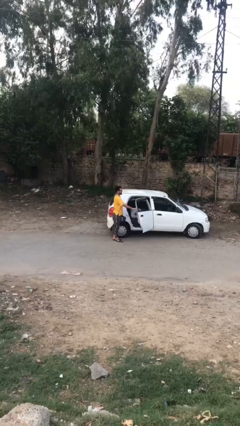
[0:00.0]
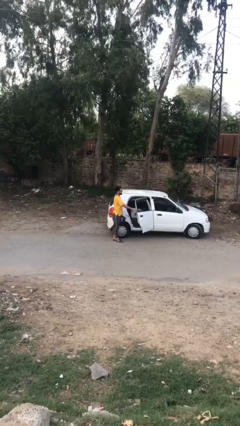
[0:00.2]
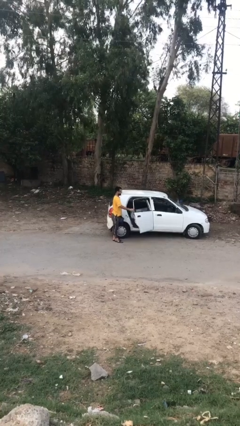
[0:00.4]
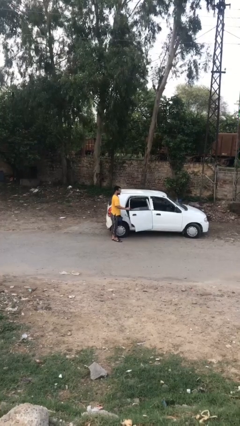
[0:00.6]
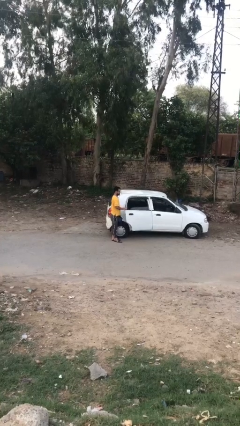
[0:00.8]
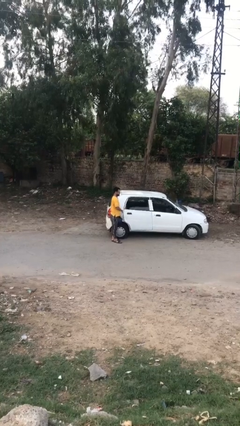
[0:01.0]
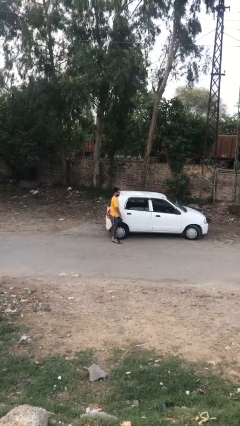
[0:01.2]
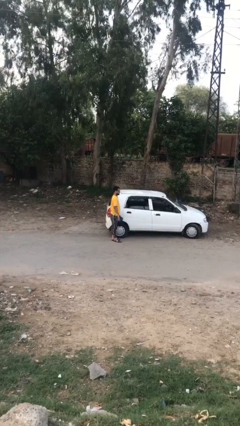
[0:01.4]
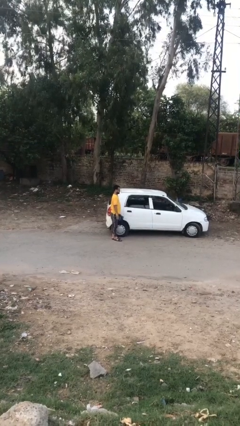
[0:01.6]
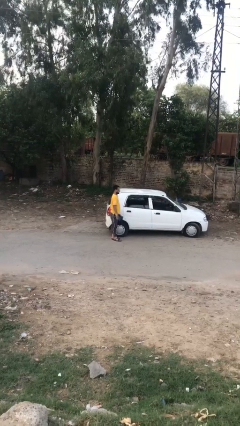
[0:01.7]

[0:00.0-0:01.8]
person closes car door

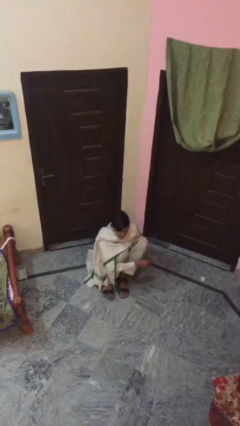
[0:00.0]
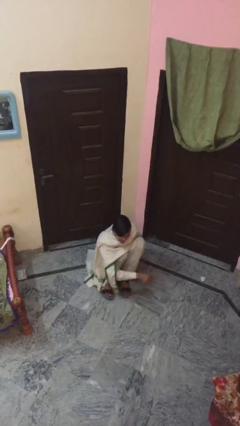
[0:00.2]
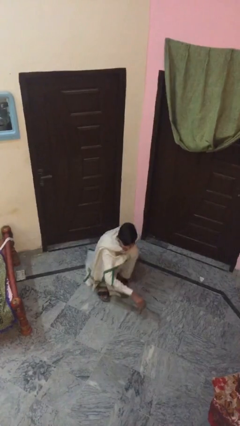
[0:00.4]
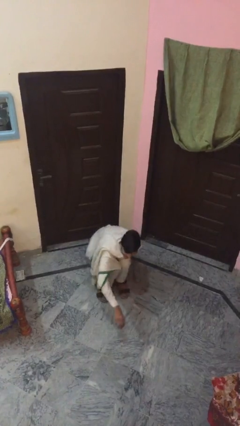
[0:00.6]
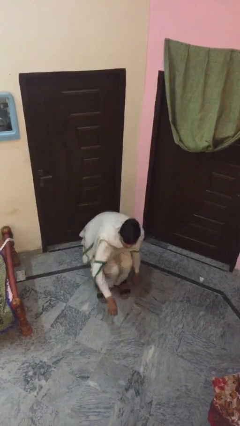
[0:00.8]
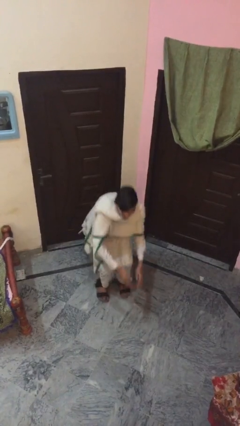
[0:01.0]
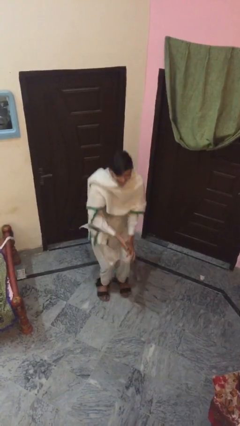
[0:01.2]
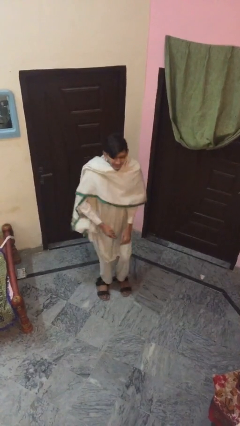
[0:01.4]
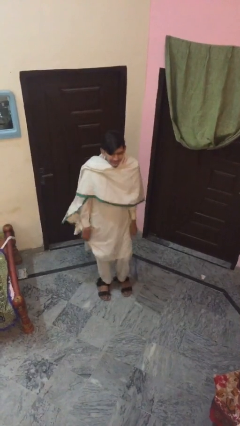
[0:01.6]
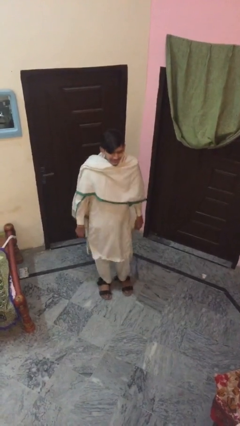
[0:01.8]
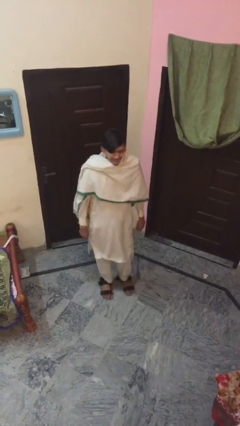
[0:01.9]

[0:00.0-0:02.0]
person stands up

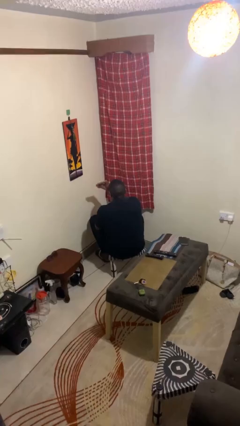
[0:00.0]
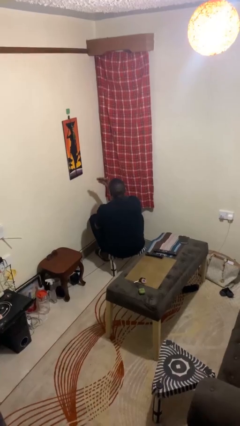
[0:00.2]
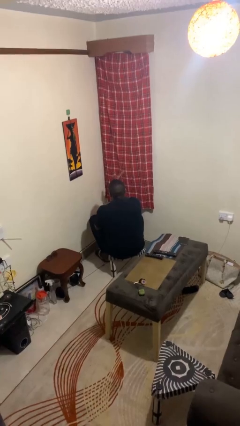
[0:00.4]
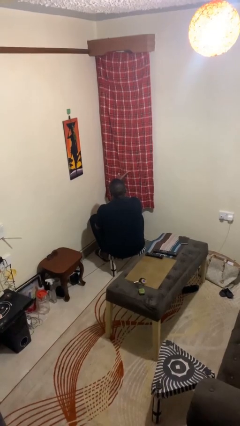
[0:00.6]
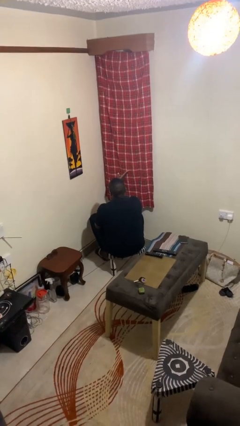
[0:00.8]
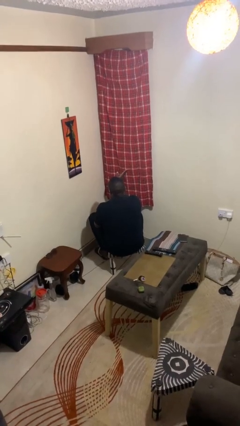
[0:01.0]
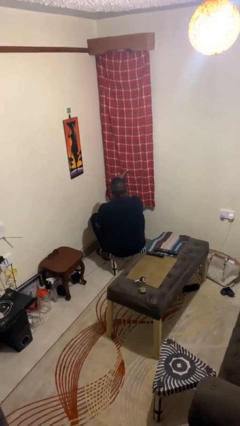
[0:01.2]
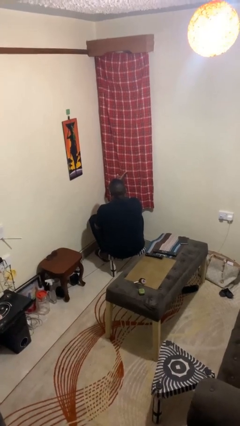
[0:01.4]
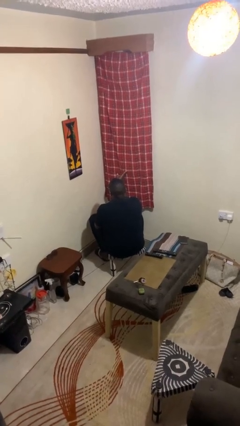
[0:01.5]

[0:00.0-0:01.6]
person gestures swipe right

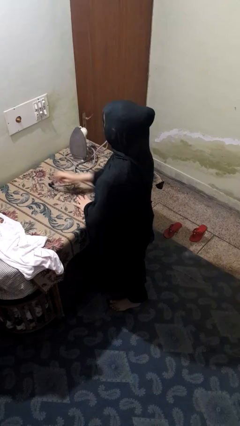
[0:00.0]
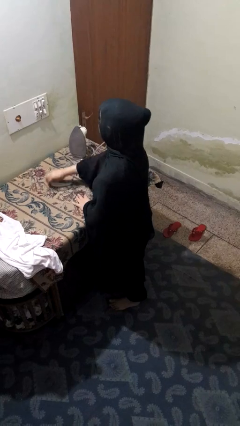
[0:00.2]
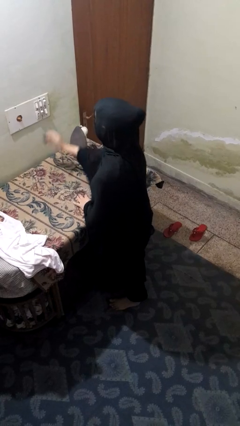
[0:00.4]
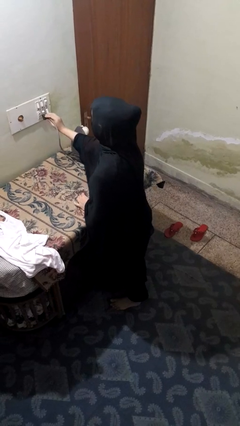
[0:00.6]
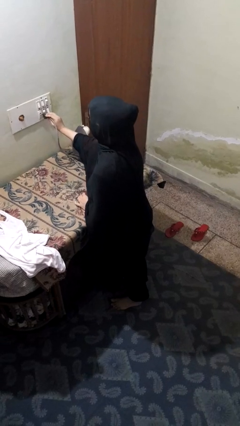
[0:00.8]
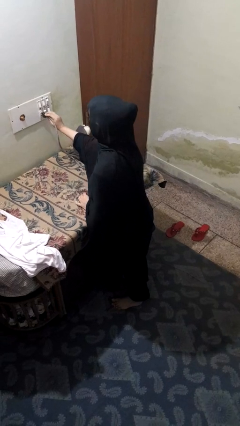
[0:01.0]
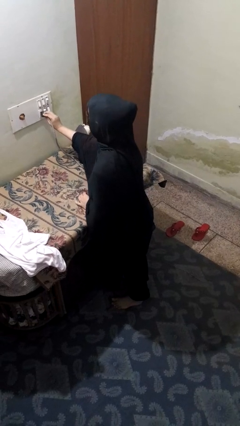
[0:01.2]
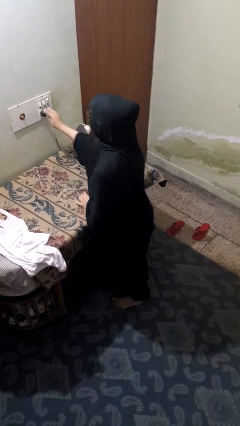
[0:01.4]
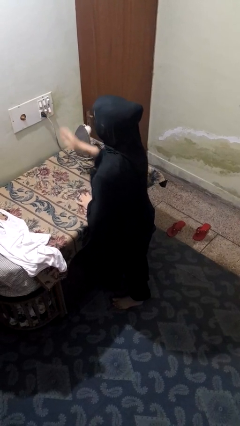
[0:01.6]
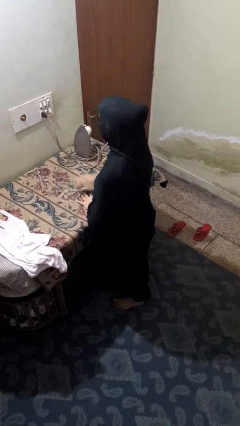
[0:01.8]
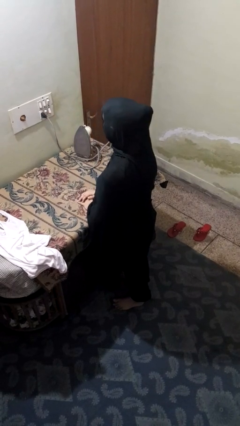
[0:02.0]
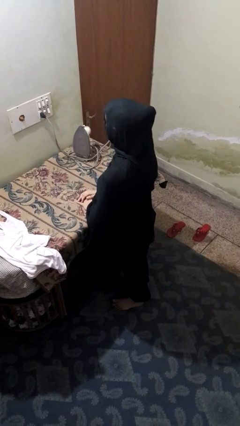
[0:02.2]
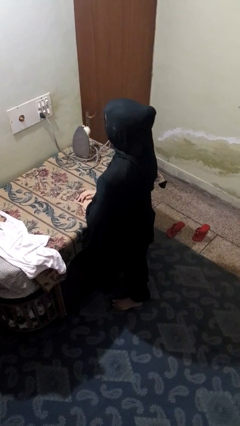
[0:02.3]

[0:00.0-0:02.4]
person plugs into electrical socket

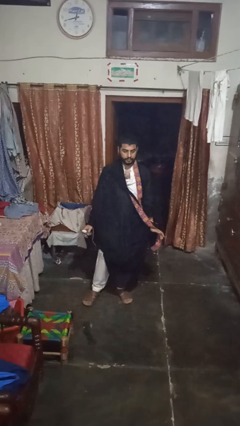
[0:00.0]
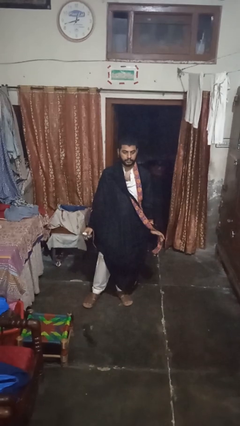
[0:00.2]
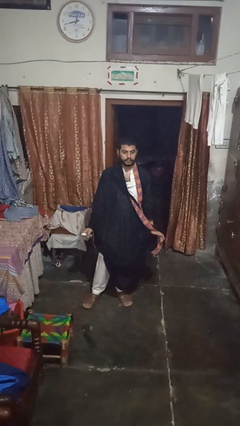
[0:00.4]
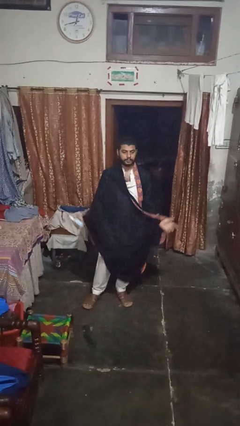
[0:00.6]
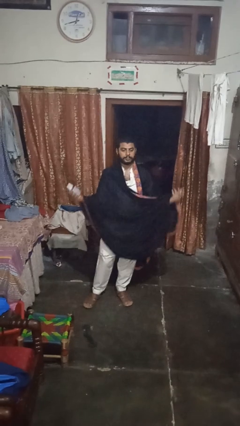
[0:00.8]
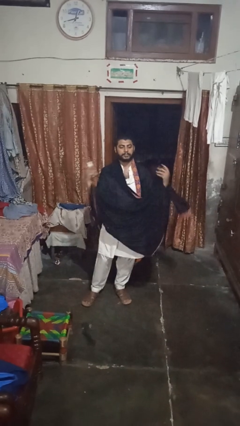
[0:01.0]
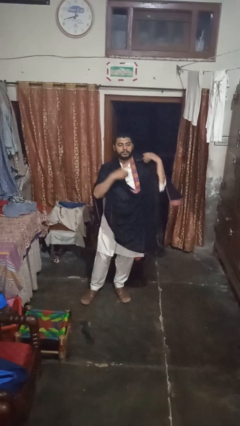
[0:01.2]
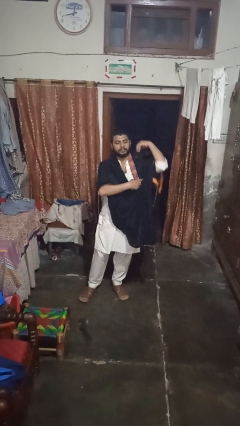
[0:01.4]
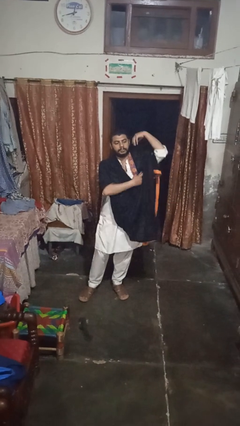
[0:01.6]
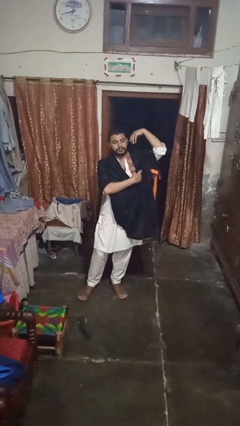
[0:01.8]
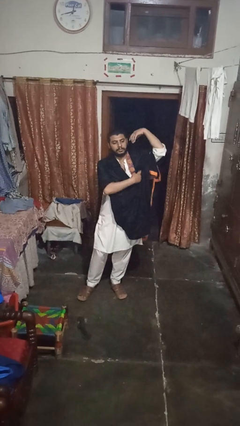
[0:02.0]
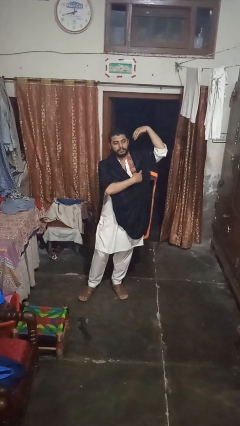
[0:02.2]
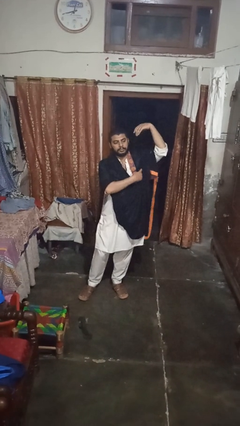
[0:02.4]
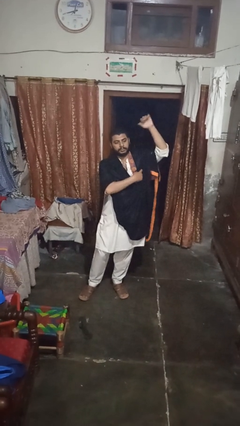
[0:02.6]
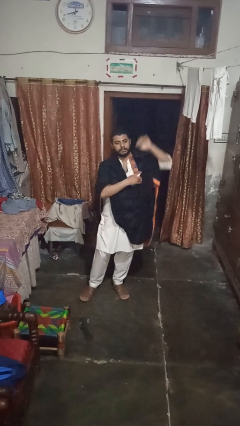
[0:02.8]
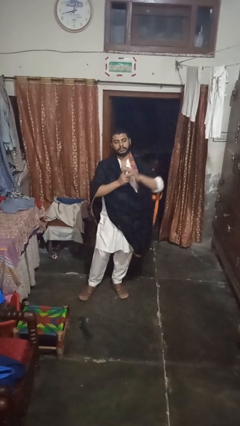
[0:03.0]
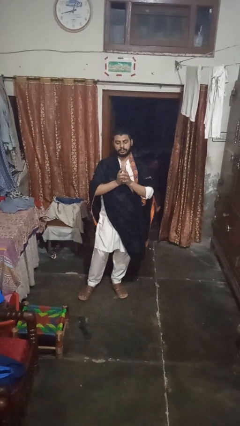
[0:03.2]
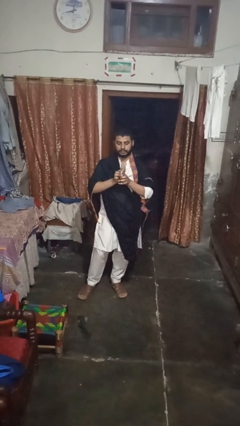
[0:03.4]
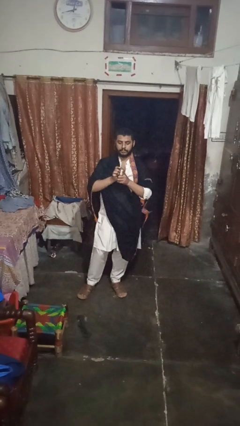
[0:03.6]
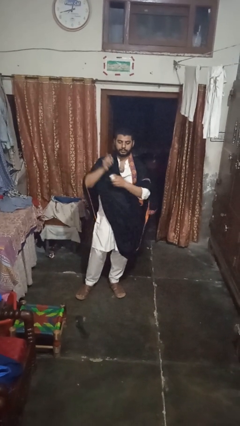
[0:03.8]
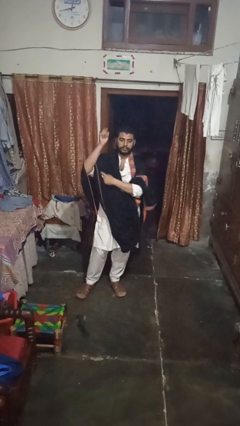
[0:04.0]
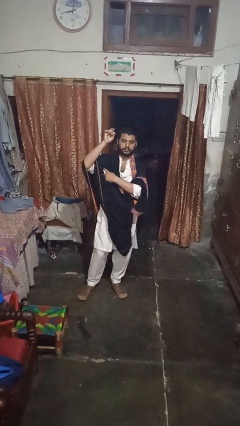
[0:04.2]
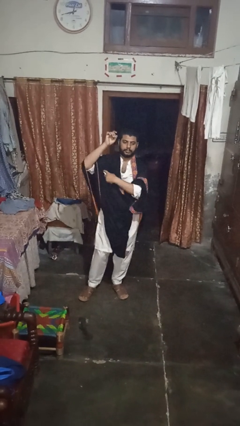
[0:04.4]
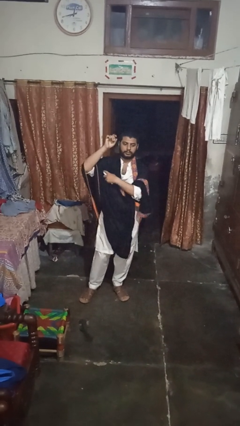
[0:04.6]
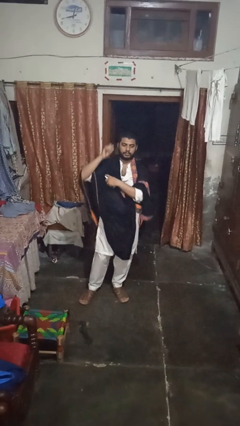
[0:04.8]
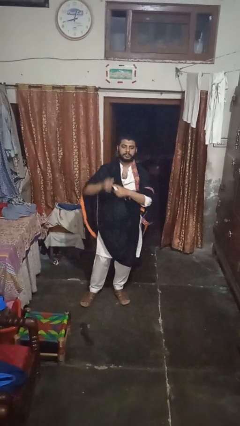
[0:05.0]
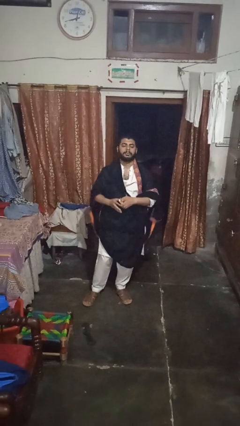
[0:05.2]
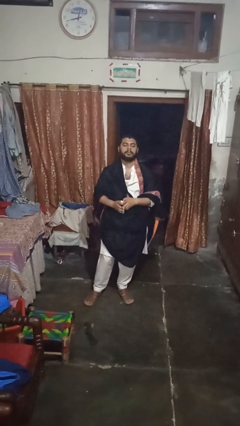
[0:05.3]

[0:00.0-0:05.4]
person applies deodorant

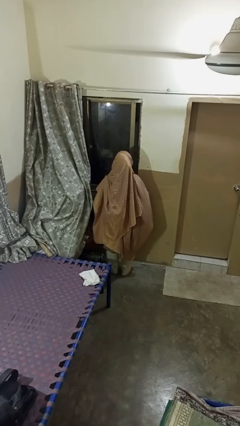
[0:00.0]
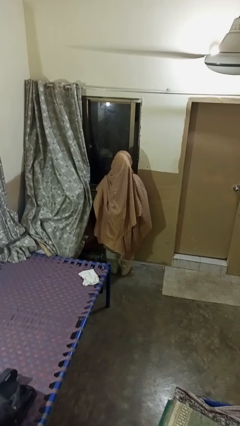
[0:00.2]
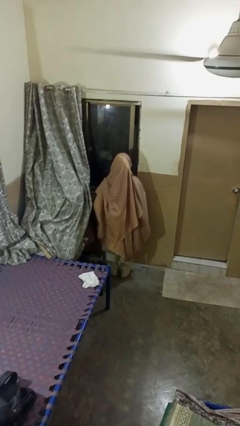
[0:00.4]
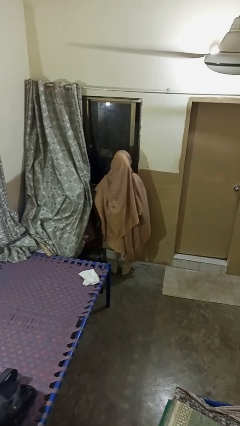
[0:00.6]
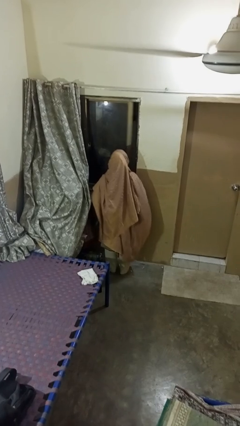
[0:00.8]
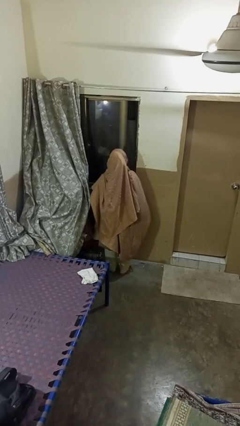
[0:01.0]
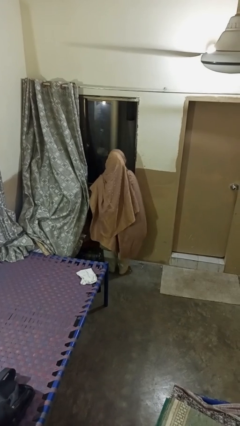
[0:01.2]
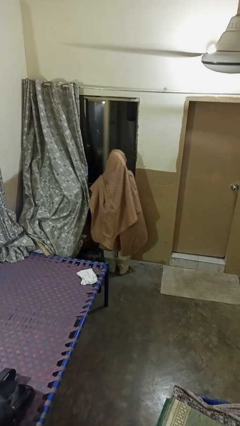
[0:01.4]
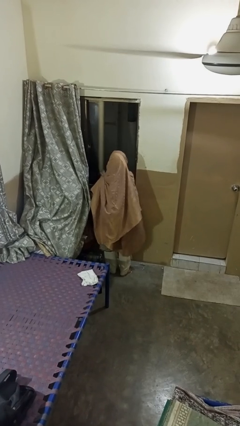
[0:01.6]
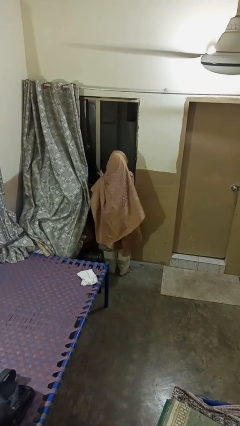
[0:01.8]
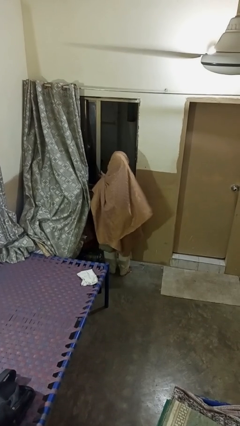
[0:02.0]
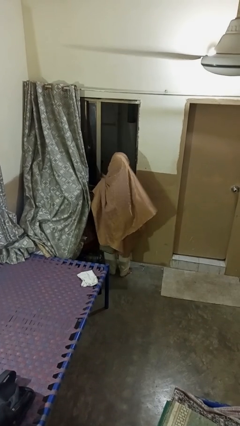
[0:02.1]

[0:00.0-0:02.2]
person opens home window

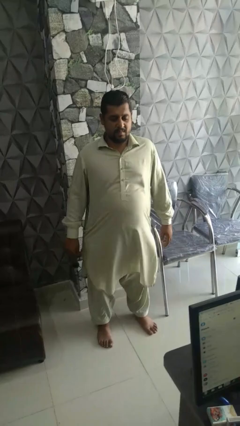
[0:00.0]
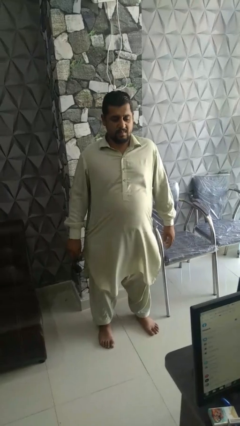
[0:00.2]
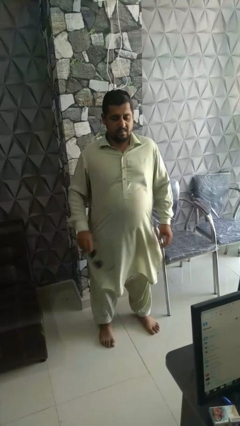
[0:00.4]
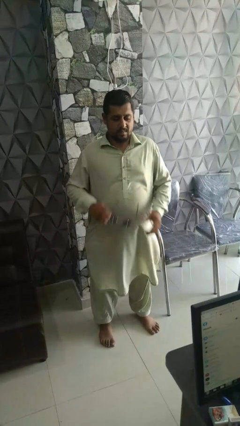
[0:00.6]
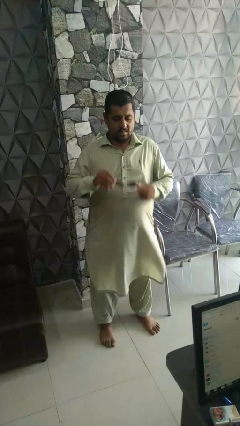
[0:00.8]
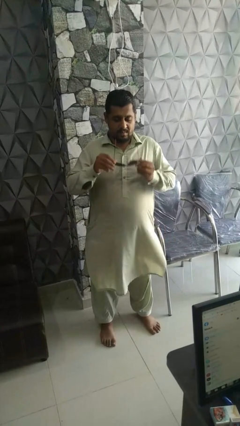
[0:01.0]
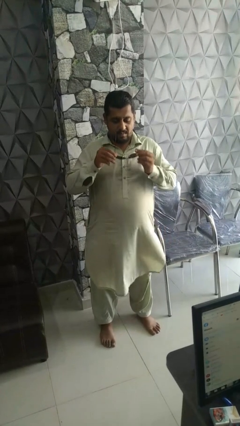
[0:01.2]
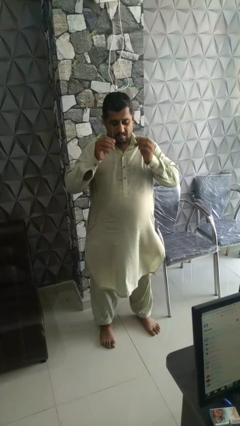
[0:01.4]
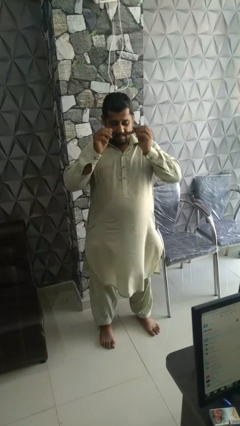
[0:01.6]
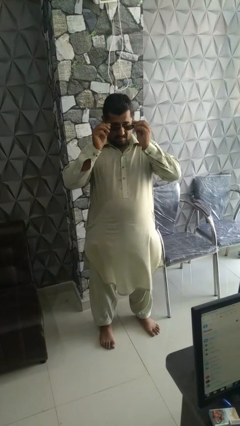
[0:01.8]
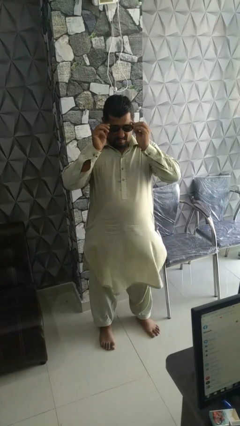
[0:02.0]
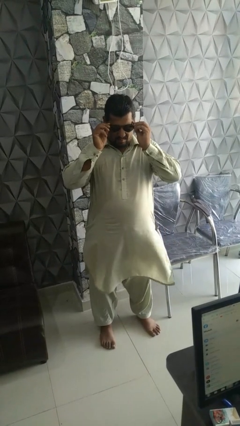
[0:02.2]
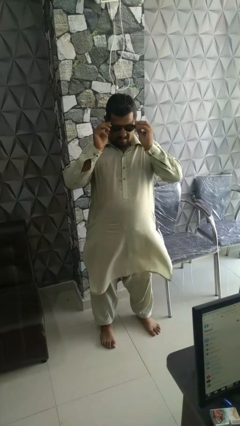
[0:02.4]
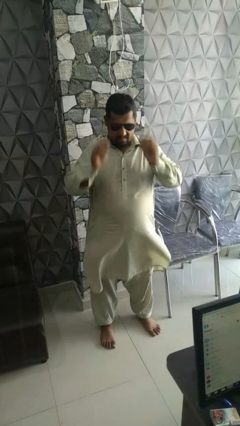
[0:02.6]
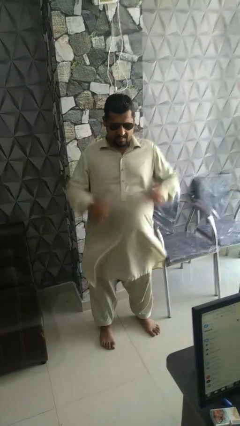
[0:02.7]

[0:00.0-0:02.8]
person puts on sunglasses
